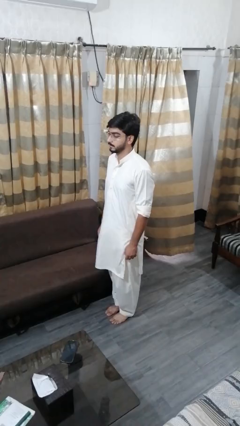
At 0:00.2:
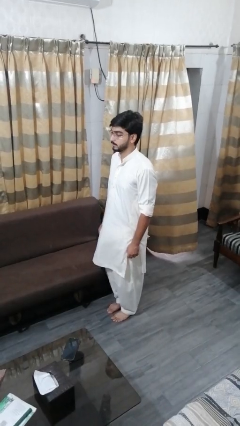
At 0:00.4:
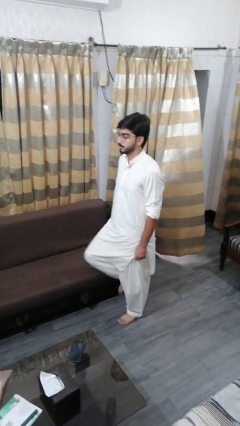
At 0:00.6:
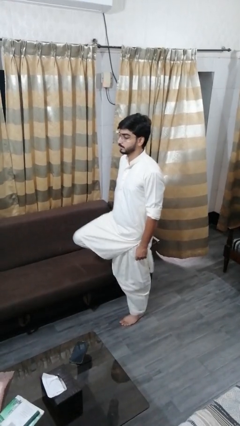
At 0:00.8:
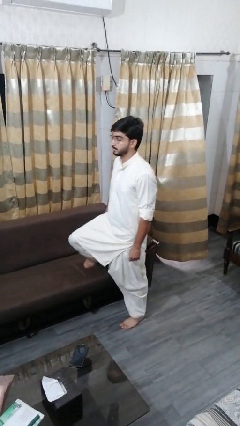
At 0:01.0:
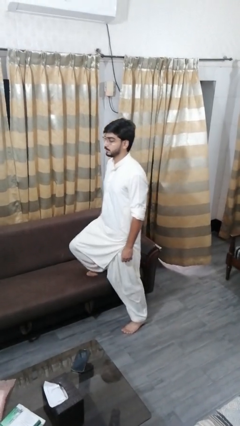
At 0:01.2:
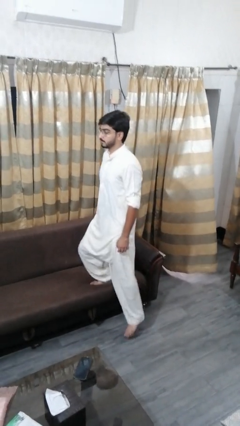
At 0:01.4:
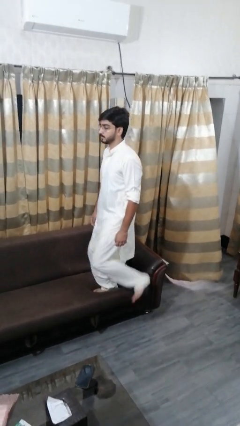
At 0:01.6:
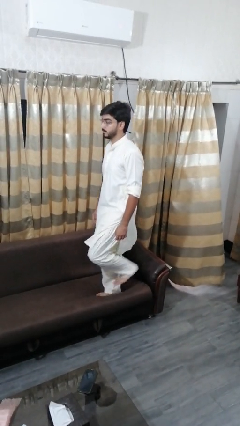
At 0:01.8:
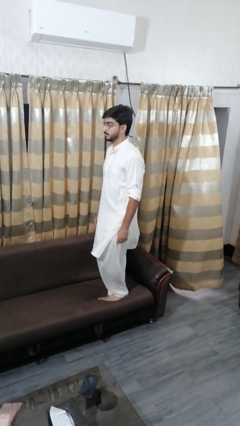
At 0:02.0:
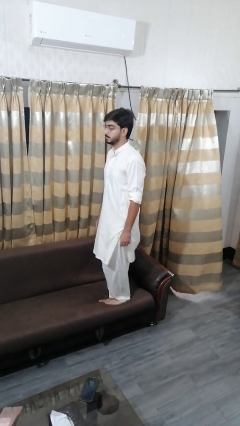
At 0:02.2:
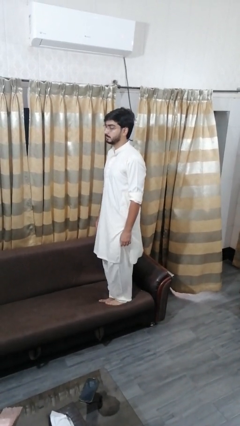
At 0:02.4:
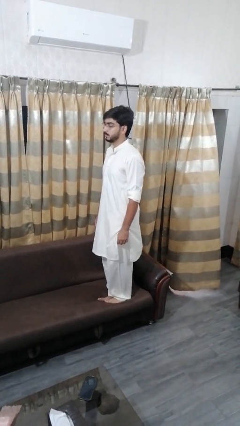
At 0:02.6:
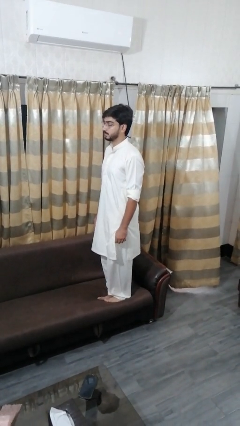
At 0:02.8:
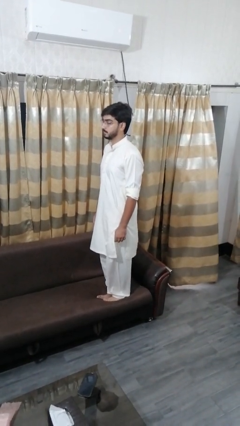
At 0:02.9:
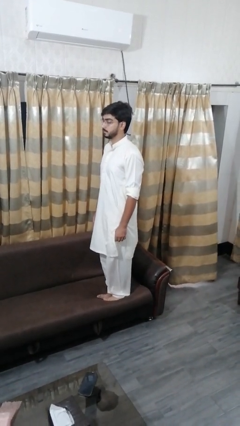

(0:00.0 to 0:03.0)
person climbs on couch

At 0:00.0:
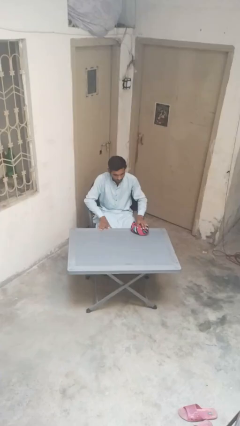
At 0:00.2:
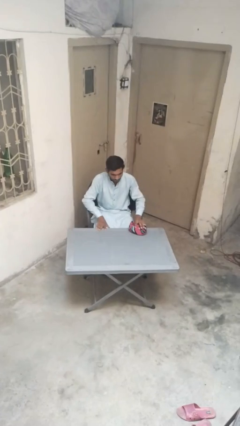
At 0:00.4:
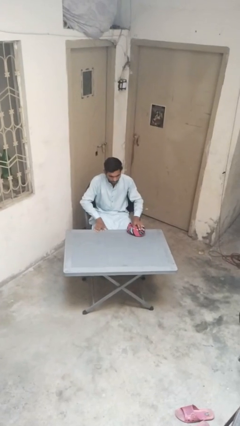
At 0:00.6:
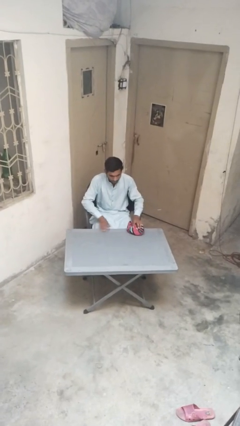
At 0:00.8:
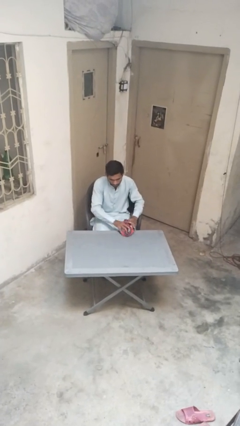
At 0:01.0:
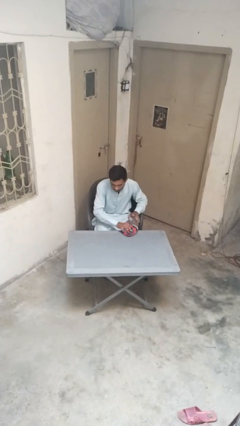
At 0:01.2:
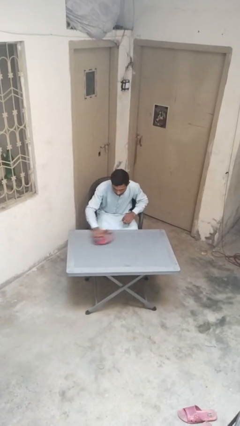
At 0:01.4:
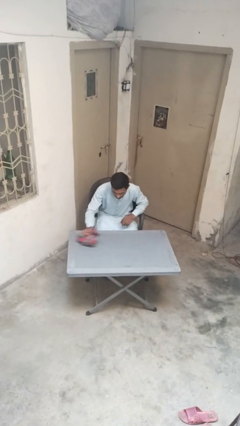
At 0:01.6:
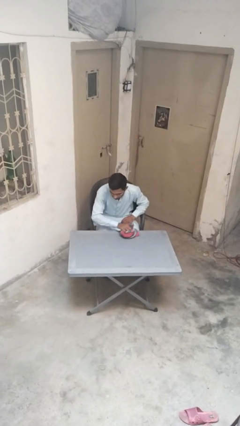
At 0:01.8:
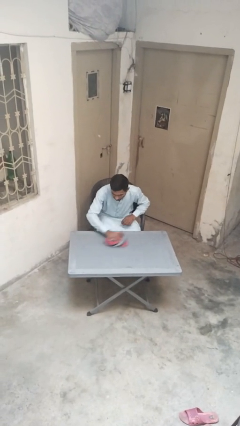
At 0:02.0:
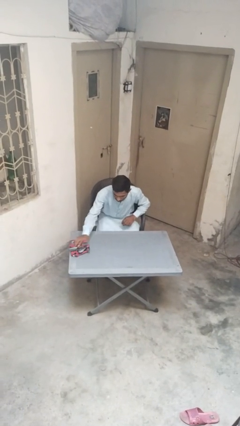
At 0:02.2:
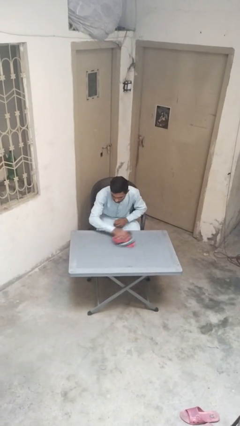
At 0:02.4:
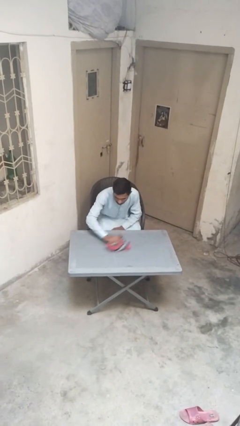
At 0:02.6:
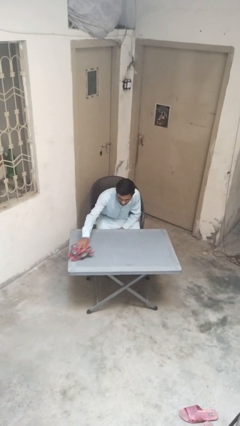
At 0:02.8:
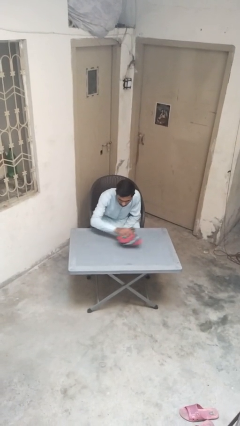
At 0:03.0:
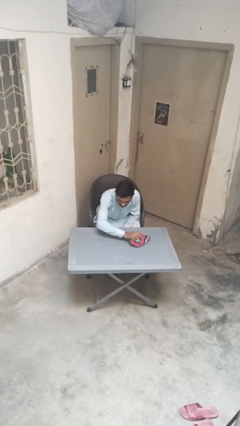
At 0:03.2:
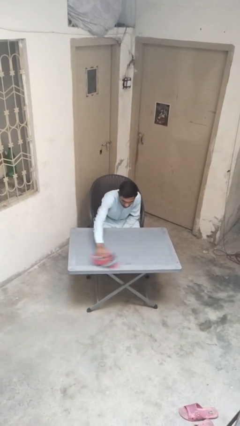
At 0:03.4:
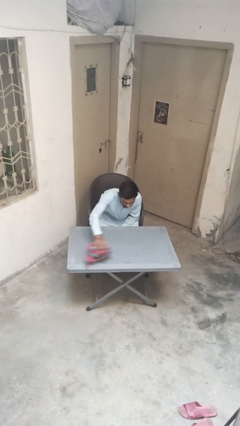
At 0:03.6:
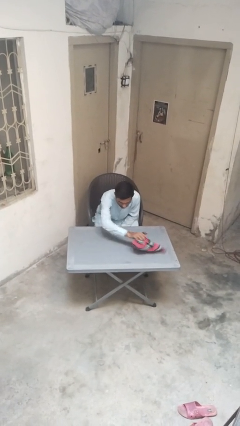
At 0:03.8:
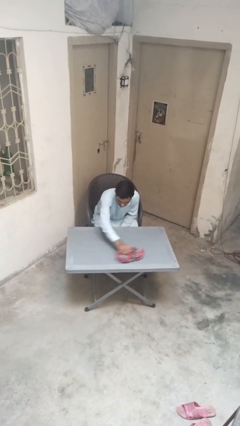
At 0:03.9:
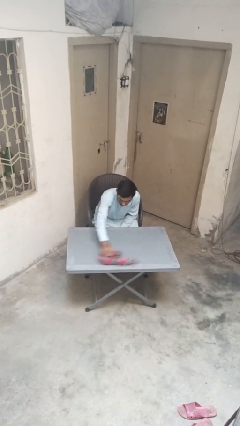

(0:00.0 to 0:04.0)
person cleans table with rag

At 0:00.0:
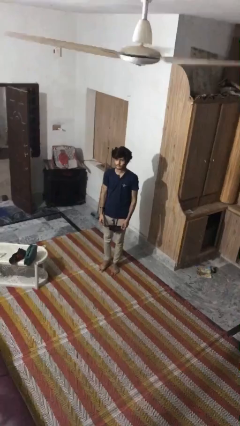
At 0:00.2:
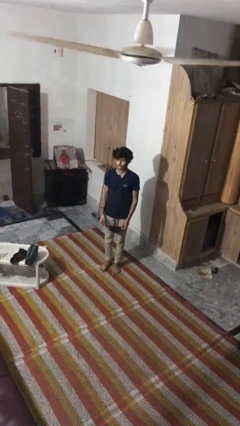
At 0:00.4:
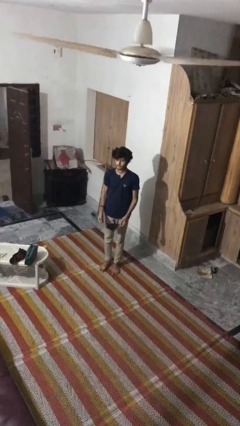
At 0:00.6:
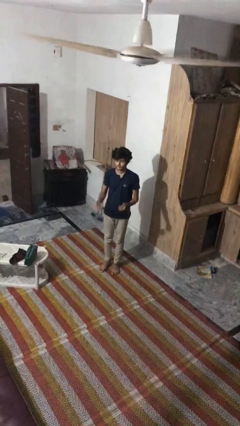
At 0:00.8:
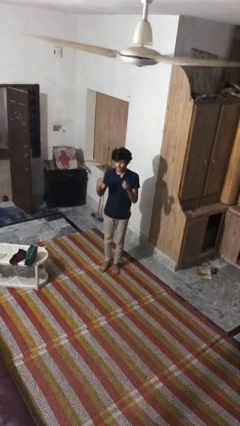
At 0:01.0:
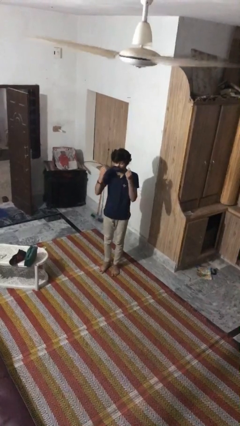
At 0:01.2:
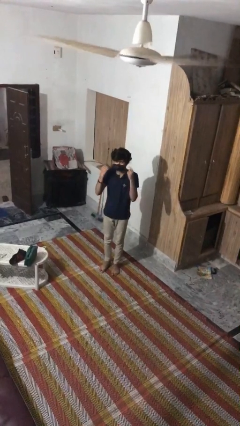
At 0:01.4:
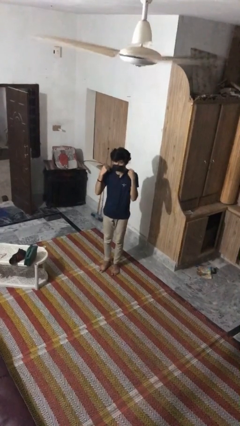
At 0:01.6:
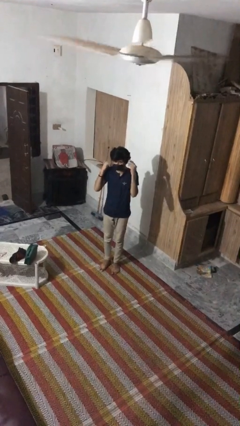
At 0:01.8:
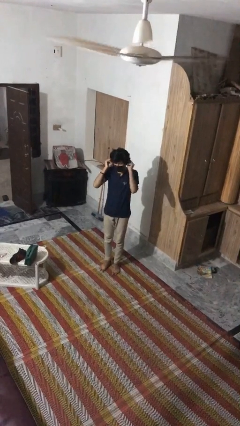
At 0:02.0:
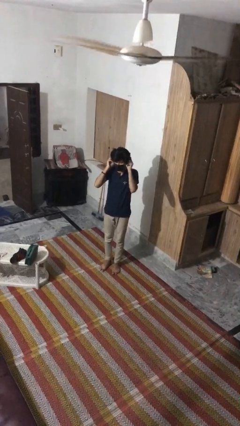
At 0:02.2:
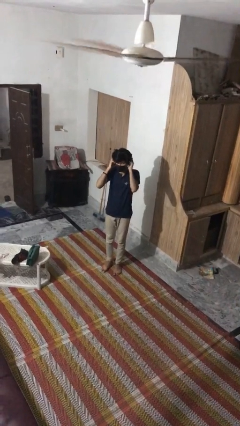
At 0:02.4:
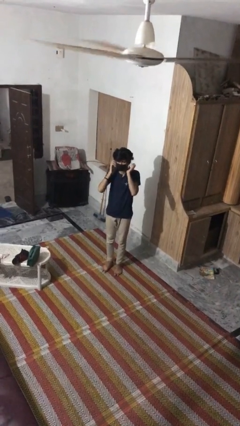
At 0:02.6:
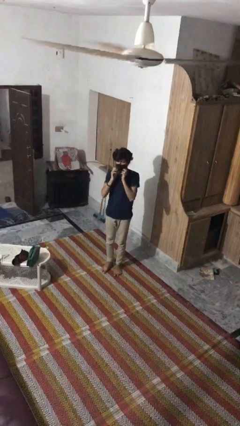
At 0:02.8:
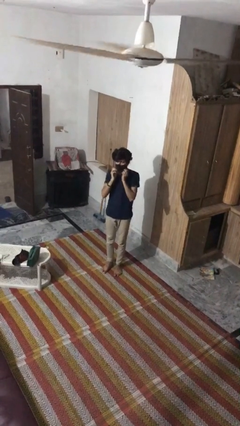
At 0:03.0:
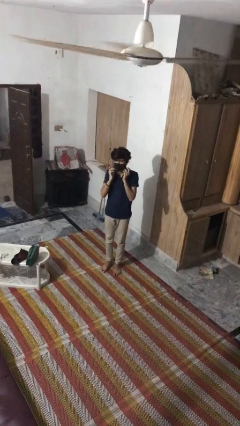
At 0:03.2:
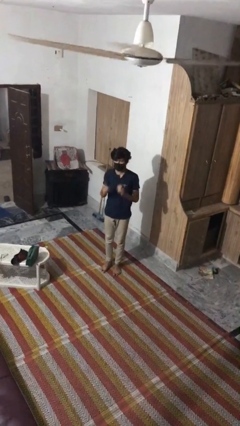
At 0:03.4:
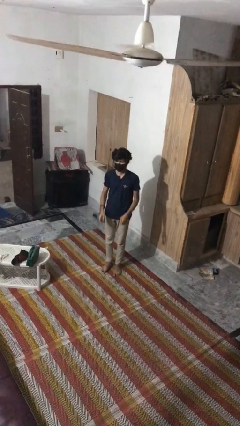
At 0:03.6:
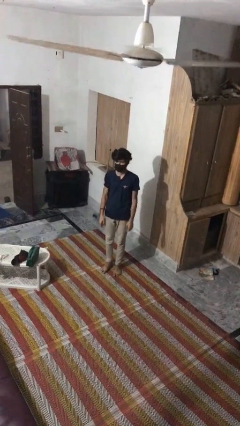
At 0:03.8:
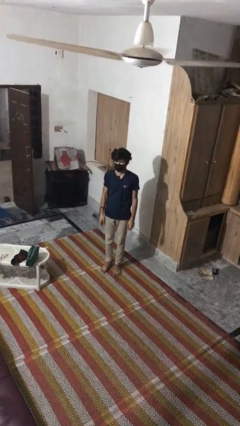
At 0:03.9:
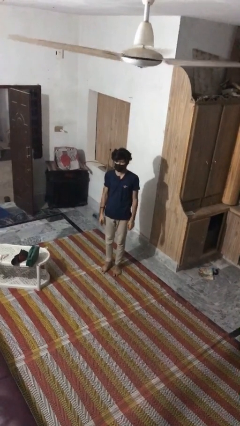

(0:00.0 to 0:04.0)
person puts on facemask

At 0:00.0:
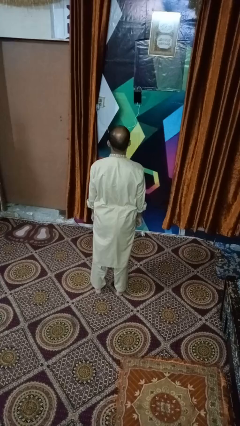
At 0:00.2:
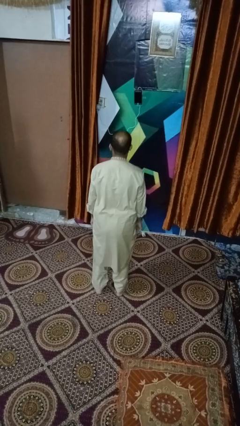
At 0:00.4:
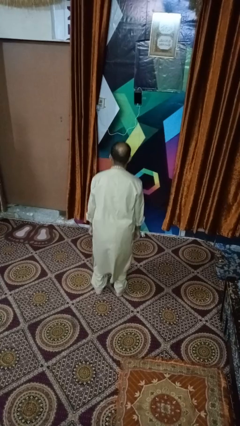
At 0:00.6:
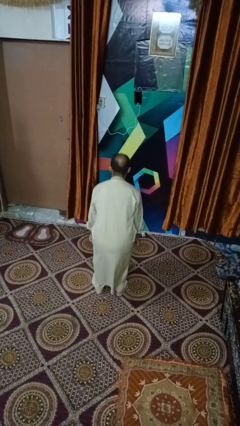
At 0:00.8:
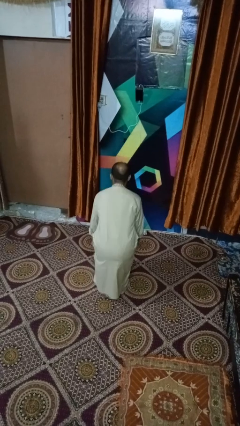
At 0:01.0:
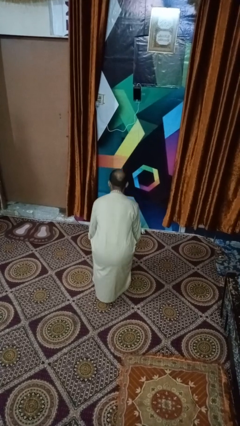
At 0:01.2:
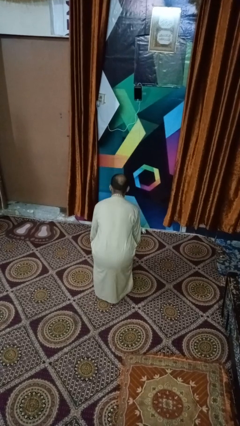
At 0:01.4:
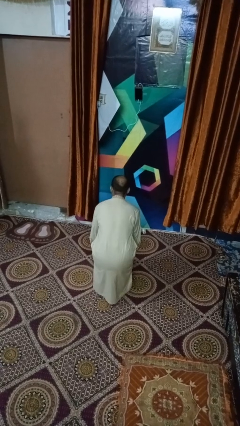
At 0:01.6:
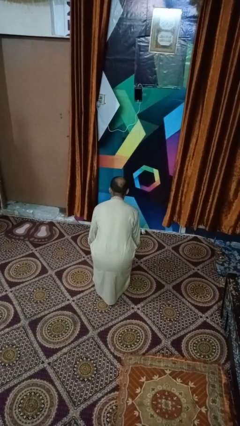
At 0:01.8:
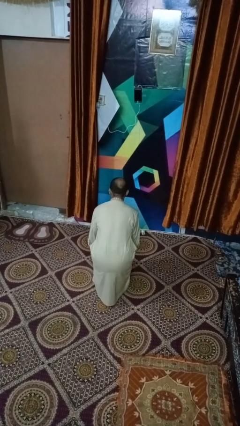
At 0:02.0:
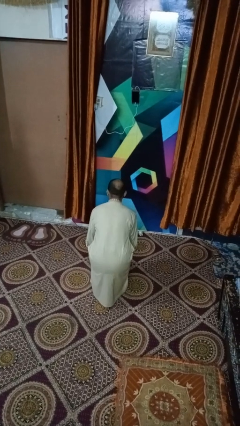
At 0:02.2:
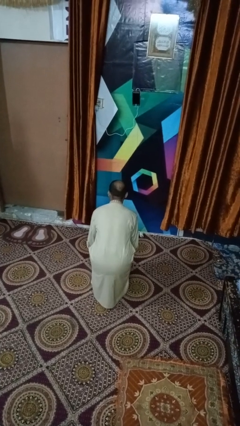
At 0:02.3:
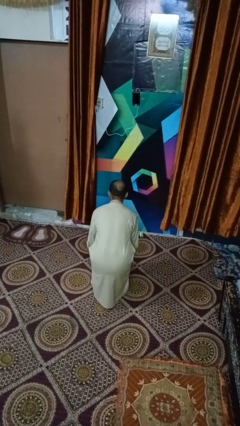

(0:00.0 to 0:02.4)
person squats

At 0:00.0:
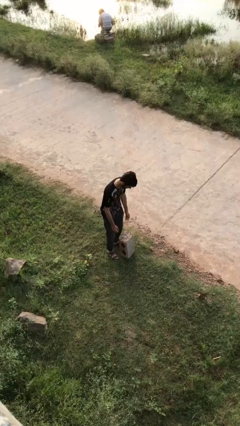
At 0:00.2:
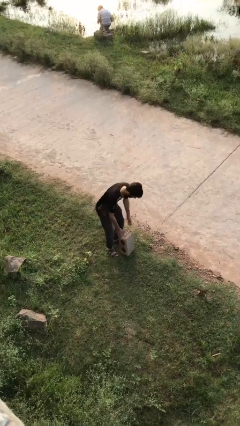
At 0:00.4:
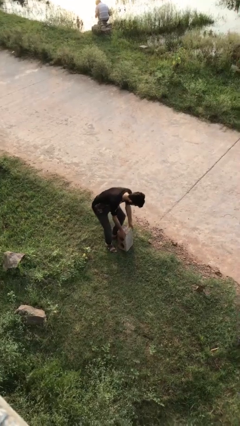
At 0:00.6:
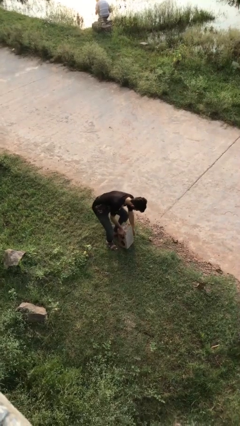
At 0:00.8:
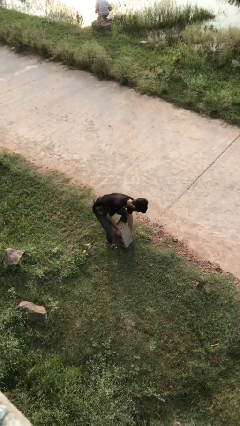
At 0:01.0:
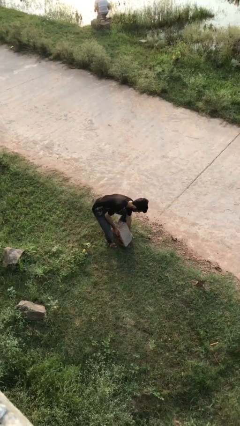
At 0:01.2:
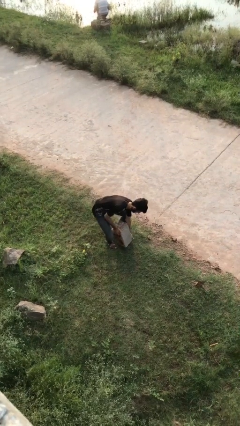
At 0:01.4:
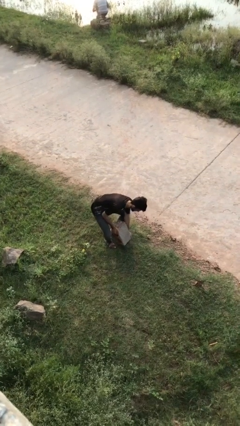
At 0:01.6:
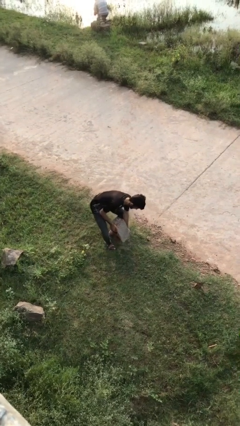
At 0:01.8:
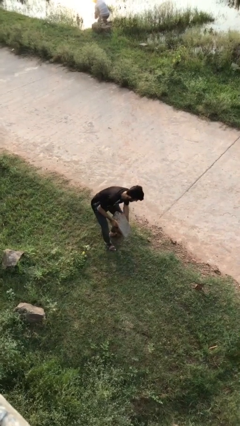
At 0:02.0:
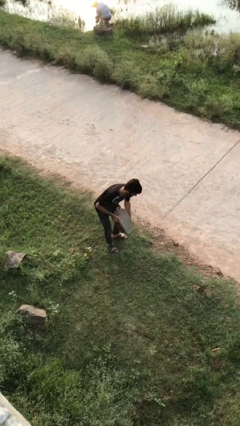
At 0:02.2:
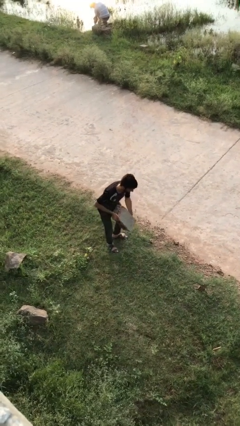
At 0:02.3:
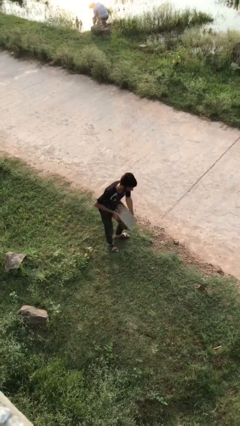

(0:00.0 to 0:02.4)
person picks up object from floor

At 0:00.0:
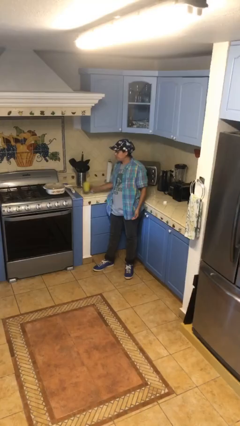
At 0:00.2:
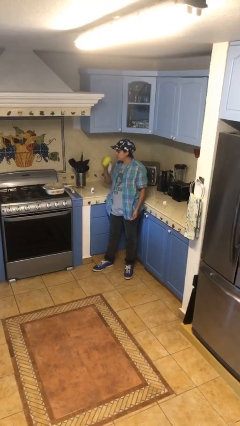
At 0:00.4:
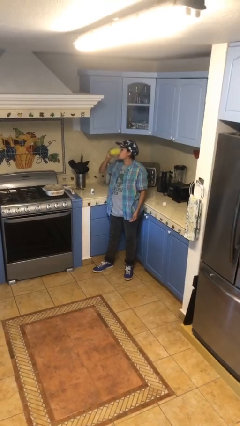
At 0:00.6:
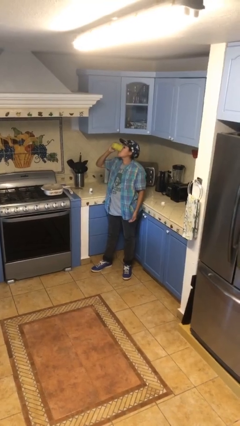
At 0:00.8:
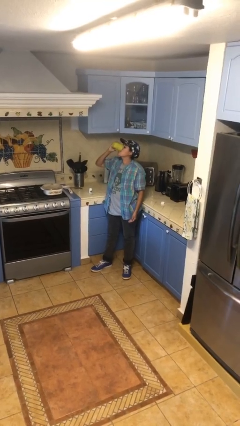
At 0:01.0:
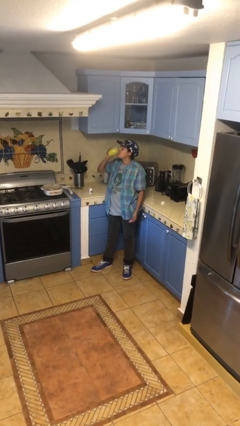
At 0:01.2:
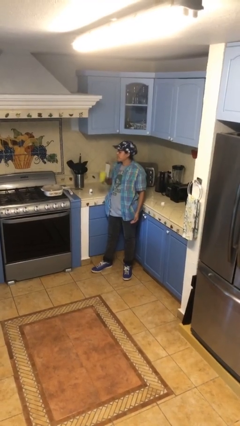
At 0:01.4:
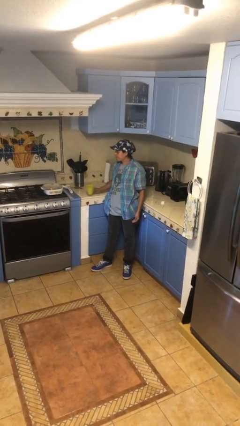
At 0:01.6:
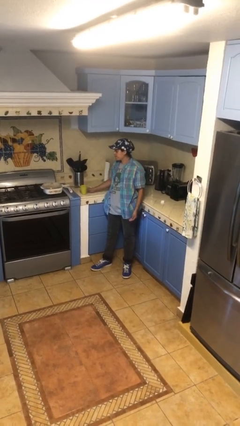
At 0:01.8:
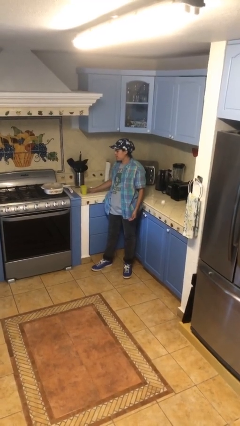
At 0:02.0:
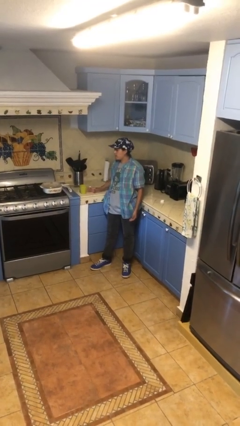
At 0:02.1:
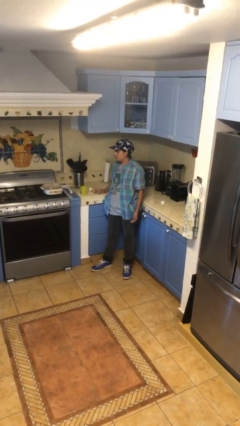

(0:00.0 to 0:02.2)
person drinks from cup
